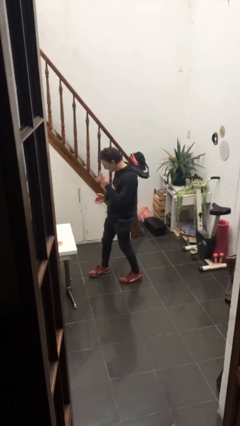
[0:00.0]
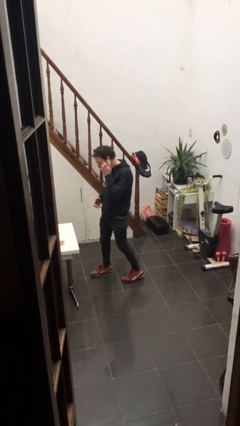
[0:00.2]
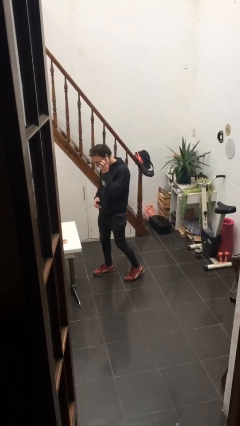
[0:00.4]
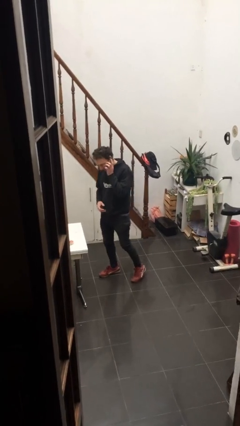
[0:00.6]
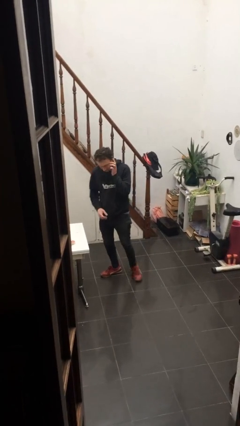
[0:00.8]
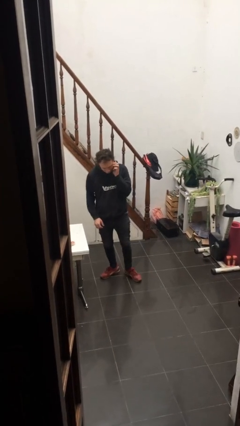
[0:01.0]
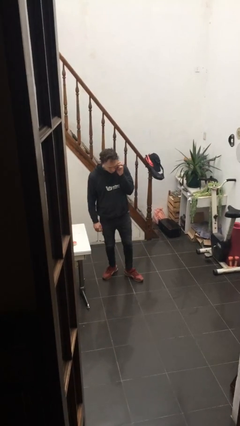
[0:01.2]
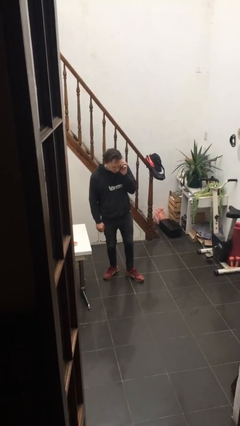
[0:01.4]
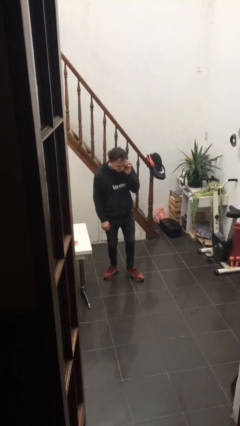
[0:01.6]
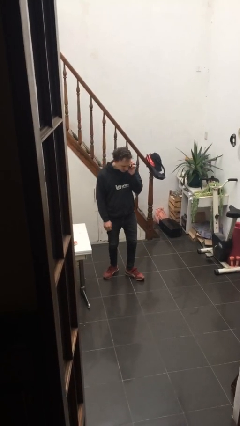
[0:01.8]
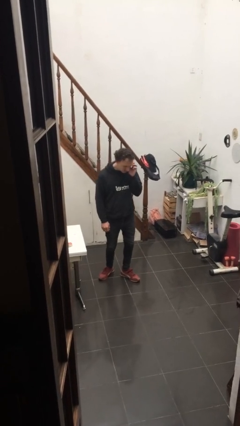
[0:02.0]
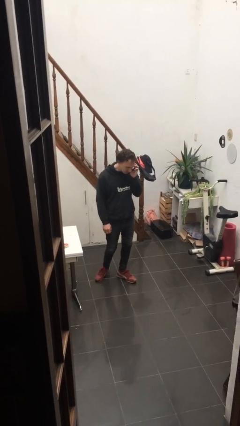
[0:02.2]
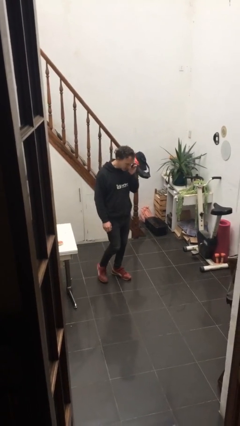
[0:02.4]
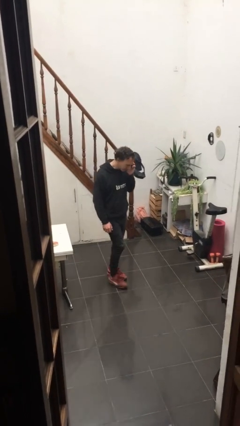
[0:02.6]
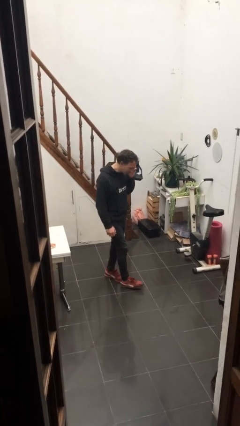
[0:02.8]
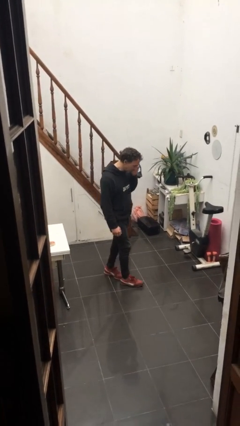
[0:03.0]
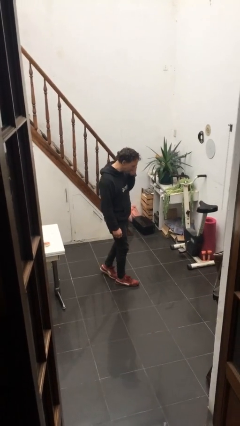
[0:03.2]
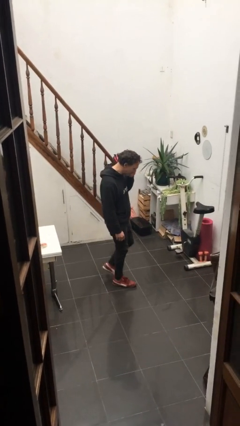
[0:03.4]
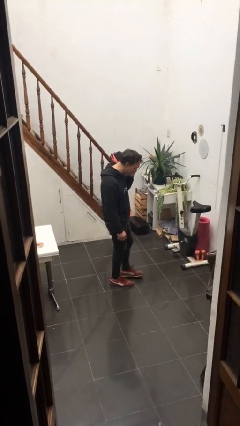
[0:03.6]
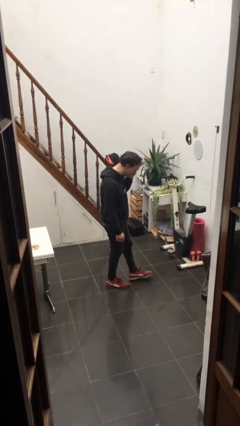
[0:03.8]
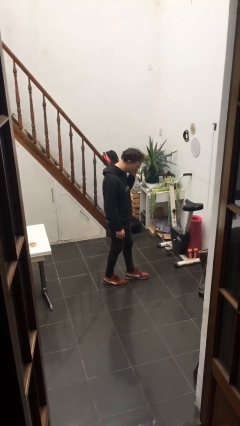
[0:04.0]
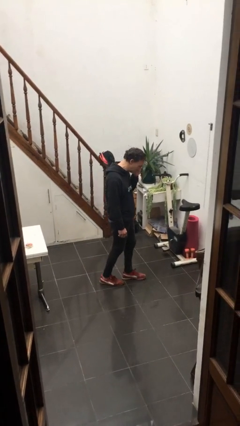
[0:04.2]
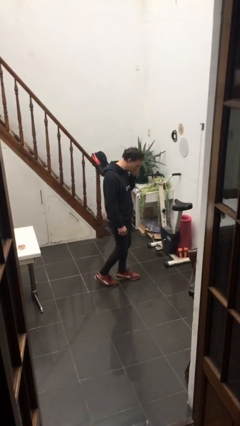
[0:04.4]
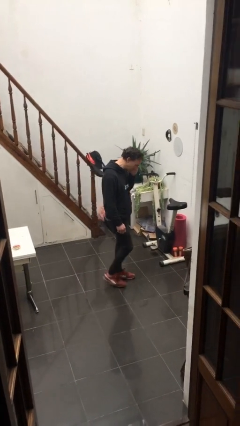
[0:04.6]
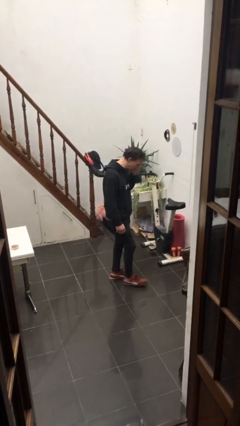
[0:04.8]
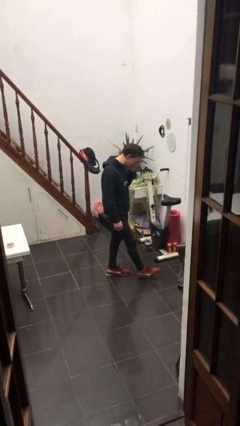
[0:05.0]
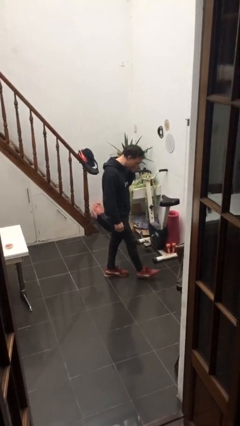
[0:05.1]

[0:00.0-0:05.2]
person talks on phone

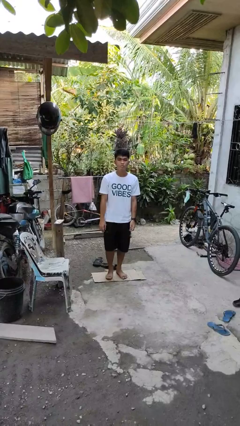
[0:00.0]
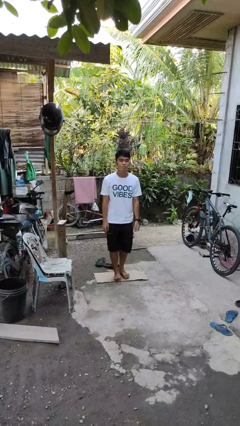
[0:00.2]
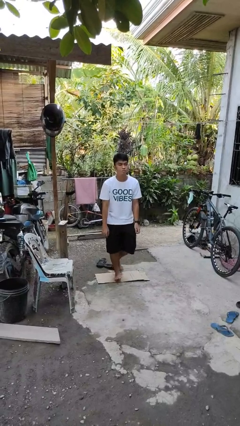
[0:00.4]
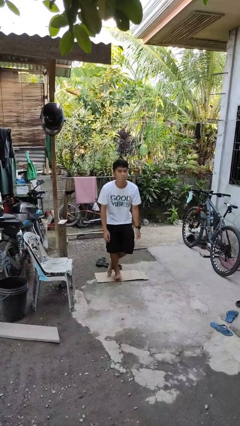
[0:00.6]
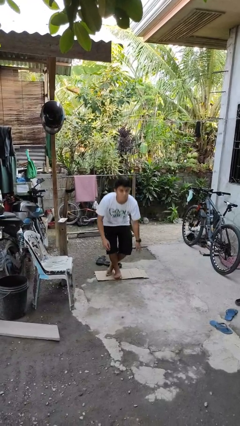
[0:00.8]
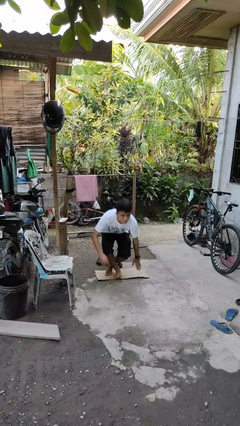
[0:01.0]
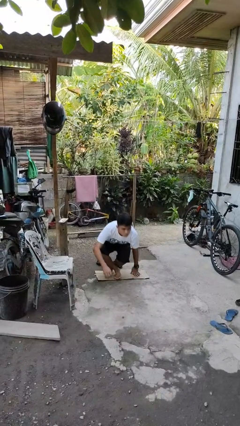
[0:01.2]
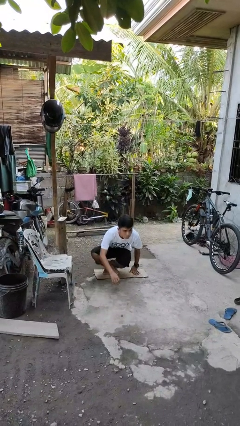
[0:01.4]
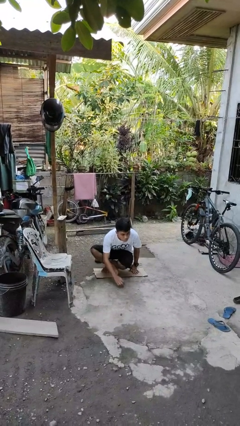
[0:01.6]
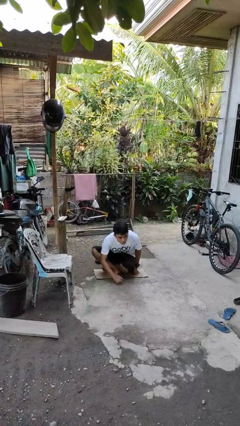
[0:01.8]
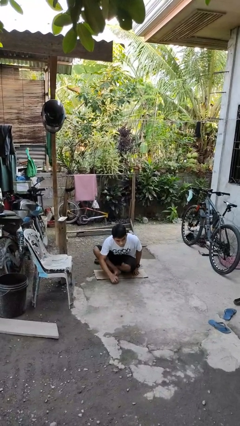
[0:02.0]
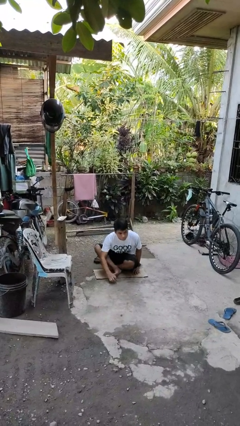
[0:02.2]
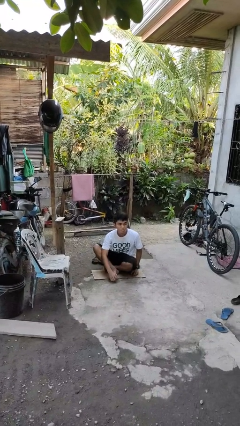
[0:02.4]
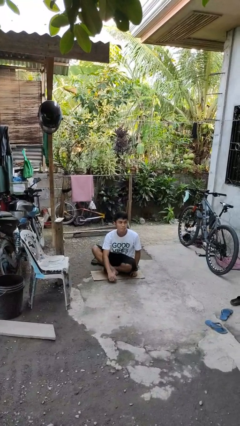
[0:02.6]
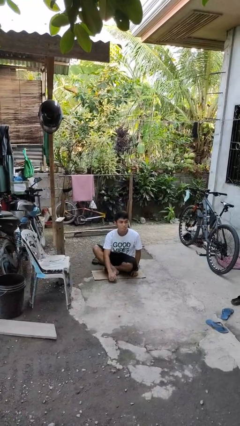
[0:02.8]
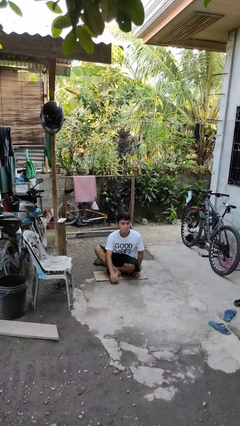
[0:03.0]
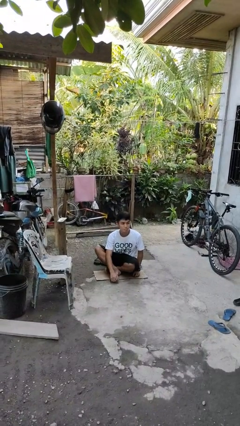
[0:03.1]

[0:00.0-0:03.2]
person sits crisscross

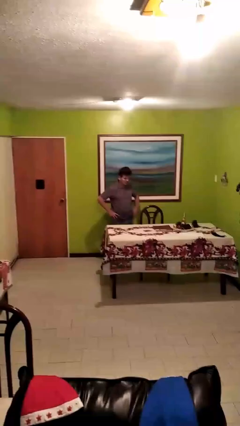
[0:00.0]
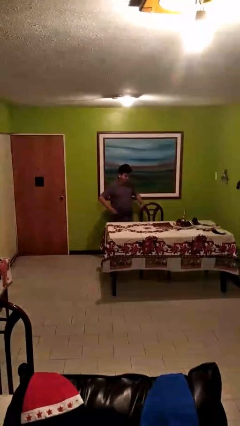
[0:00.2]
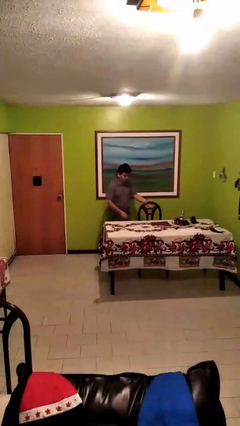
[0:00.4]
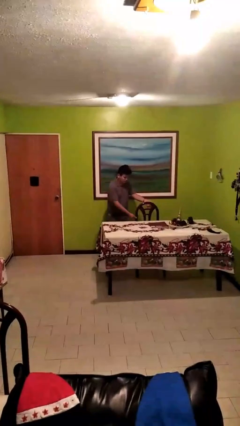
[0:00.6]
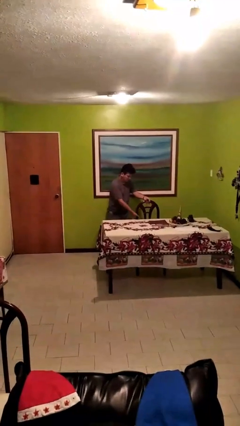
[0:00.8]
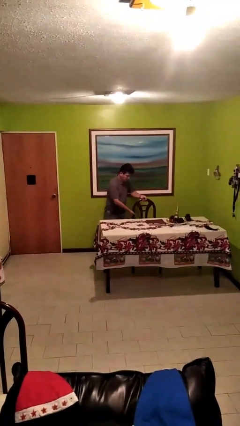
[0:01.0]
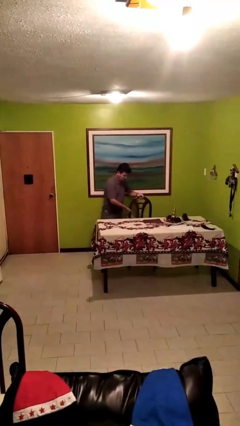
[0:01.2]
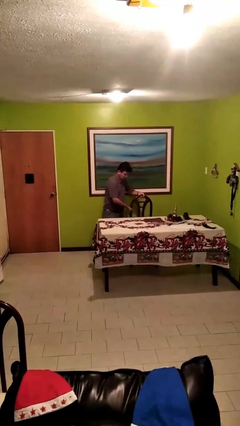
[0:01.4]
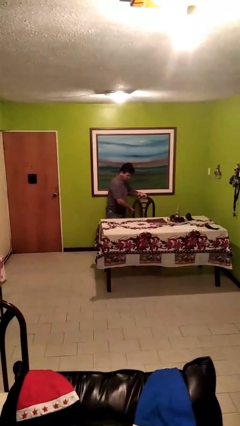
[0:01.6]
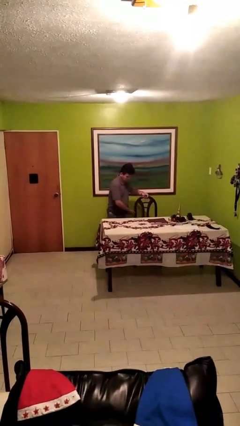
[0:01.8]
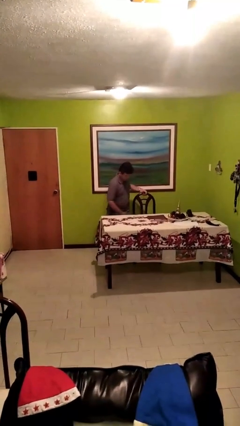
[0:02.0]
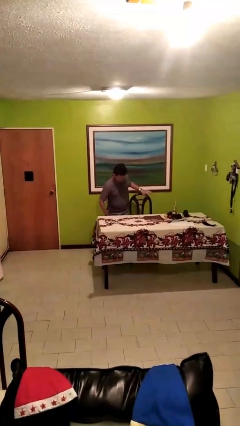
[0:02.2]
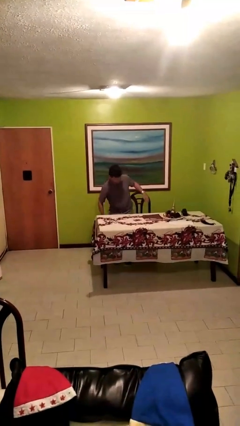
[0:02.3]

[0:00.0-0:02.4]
person stands up

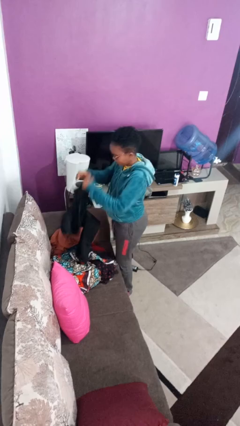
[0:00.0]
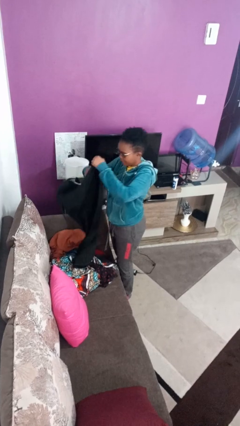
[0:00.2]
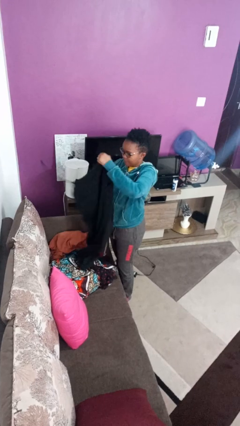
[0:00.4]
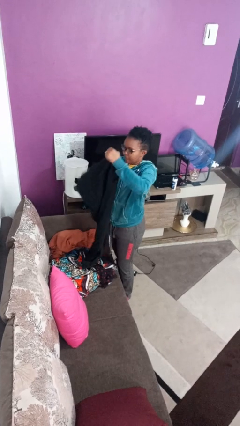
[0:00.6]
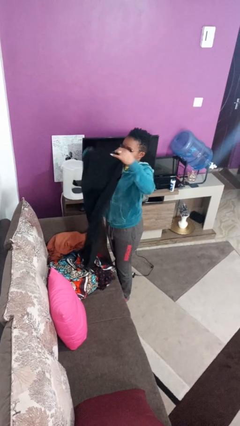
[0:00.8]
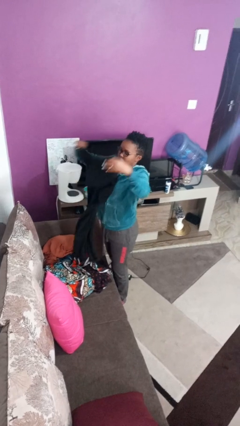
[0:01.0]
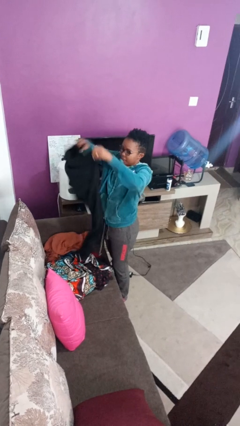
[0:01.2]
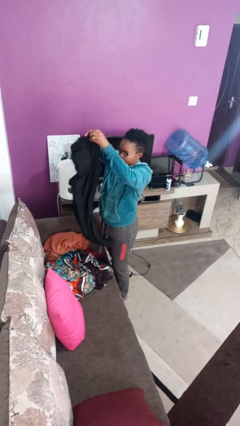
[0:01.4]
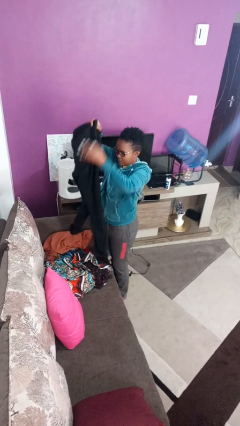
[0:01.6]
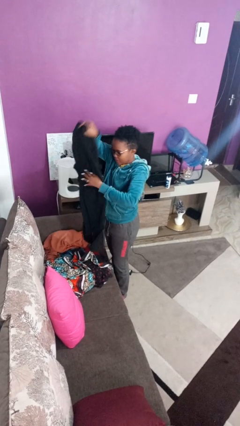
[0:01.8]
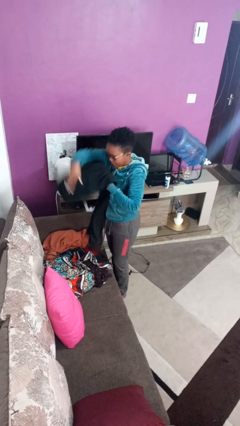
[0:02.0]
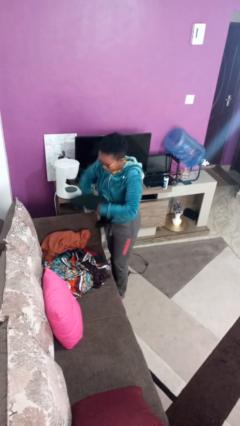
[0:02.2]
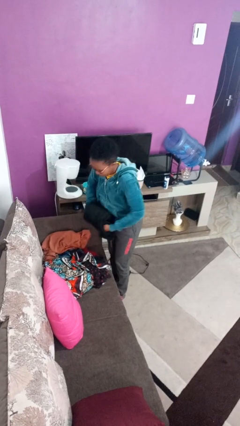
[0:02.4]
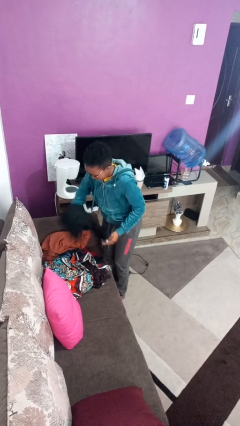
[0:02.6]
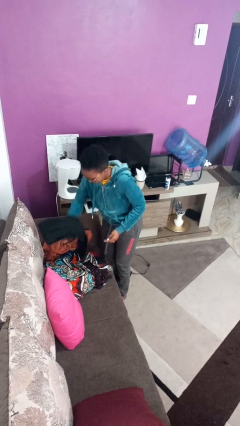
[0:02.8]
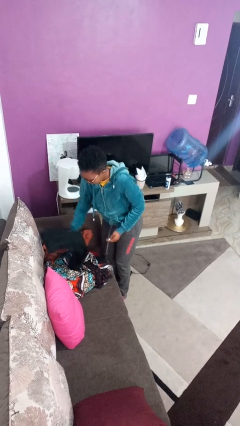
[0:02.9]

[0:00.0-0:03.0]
person folds pants

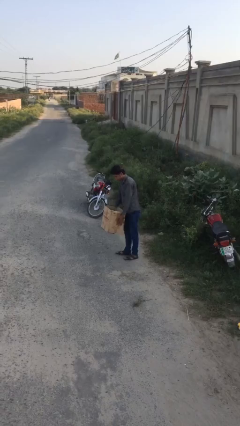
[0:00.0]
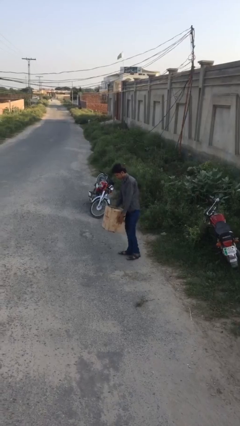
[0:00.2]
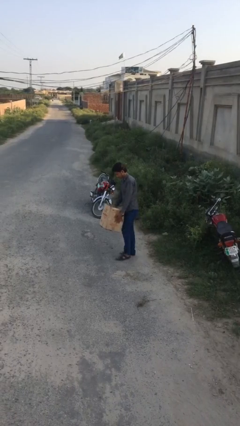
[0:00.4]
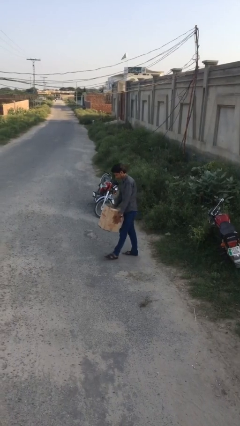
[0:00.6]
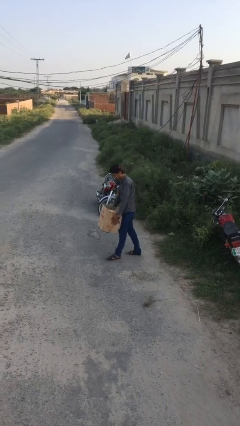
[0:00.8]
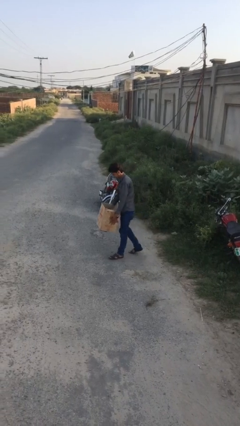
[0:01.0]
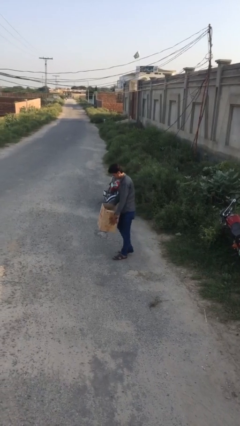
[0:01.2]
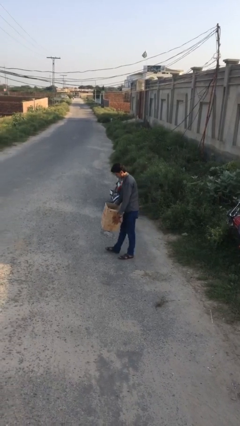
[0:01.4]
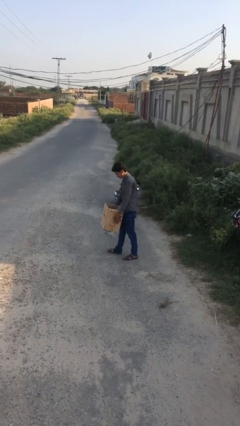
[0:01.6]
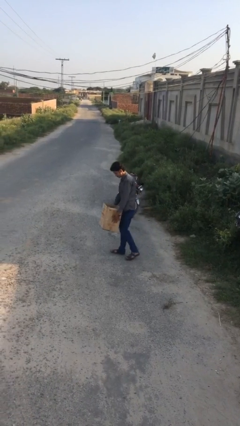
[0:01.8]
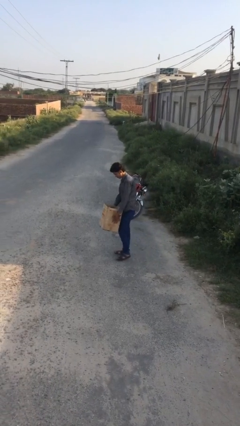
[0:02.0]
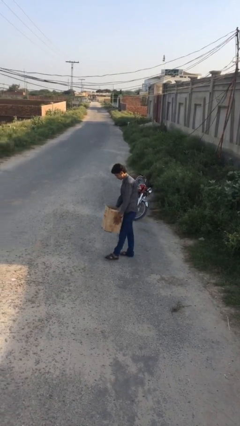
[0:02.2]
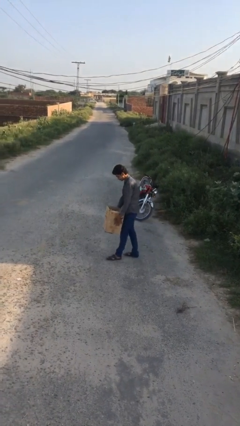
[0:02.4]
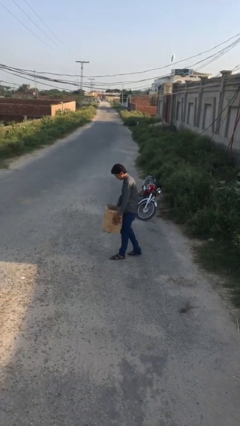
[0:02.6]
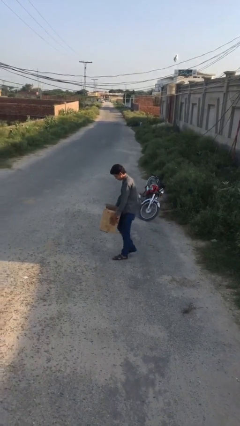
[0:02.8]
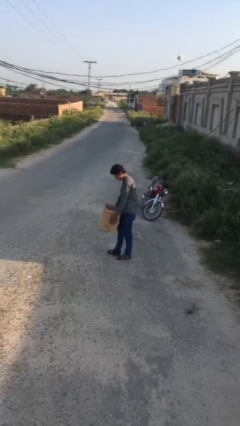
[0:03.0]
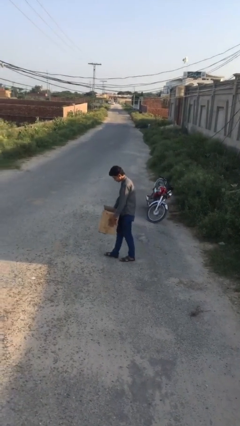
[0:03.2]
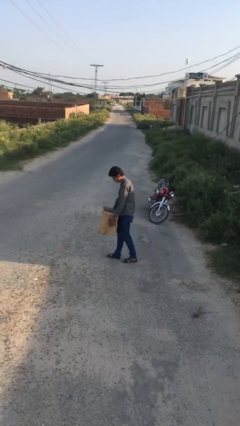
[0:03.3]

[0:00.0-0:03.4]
person carries heavy object
